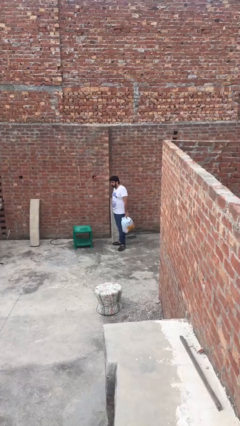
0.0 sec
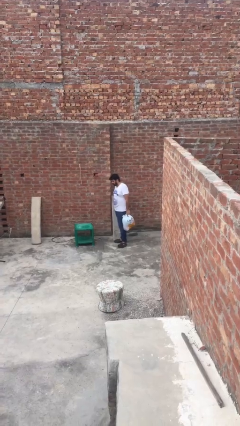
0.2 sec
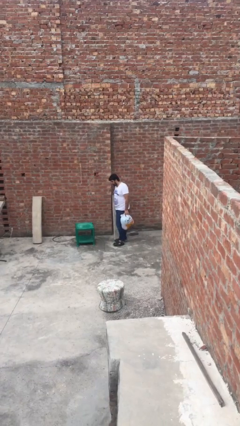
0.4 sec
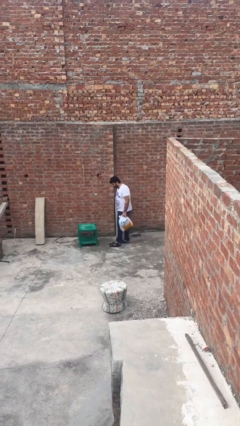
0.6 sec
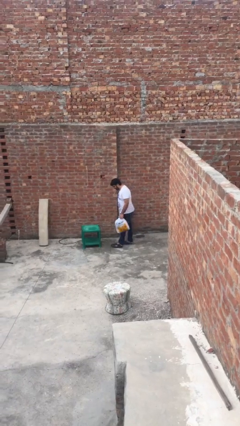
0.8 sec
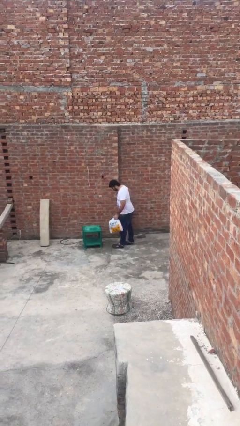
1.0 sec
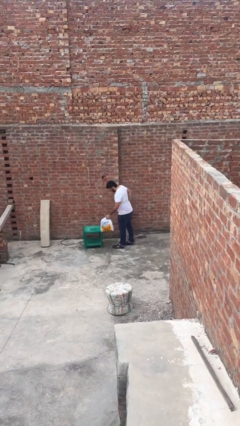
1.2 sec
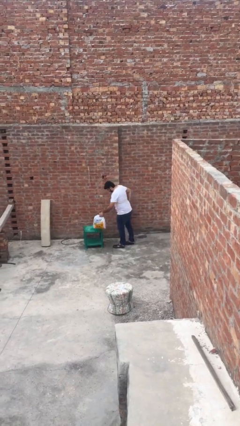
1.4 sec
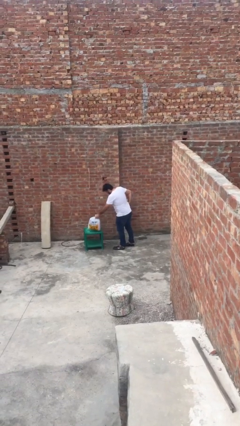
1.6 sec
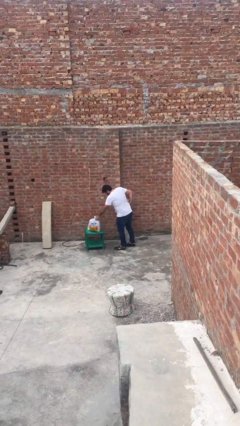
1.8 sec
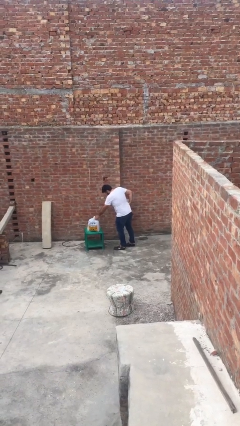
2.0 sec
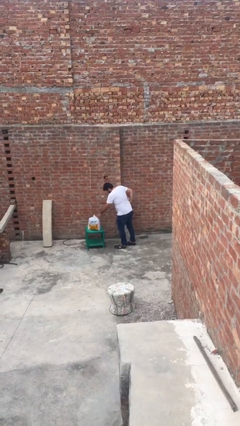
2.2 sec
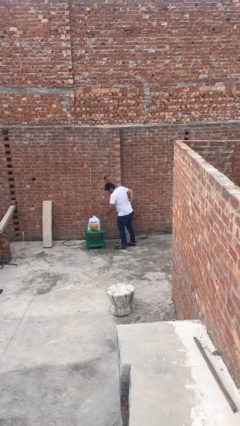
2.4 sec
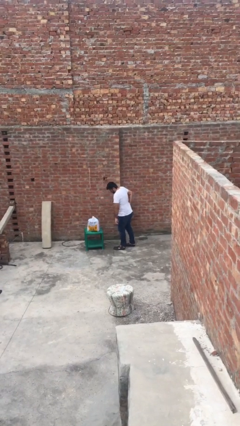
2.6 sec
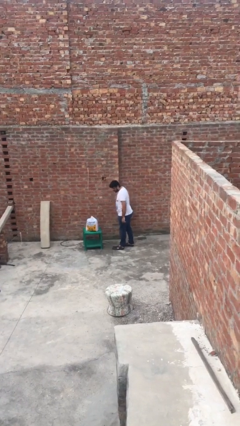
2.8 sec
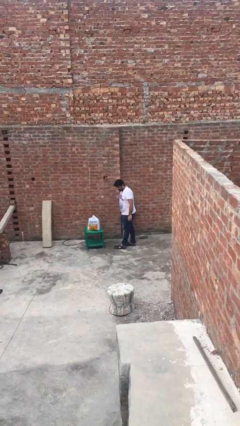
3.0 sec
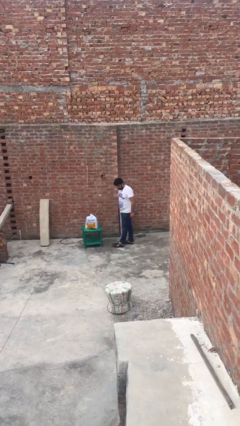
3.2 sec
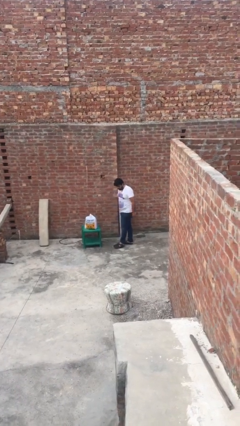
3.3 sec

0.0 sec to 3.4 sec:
person puts down object on table

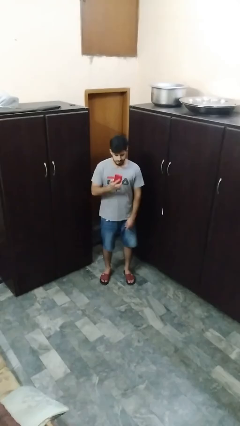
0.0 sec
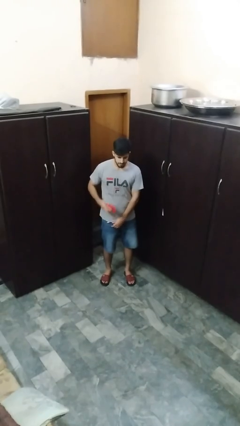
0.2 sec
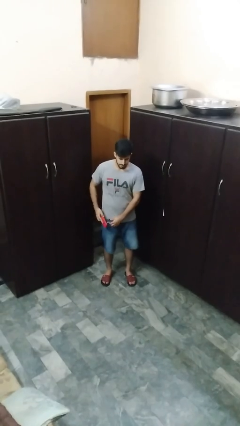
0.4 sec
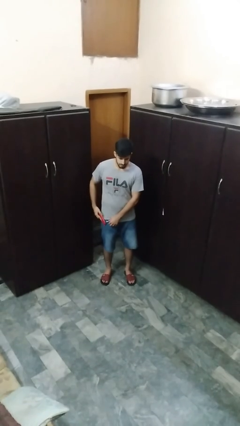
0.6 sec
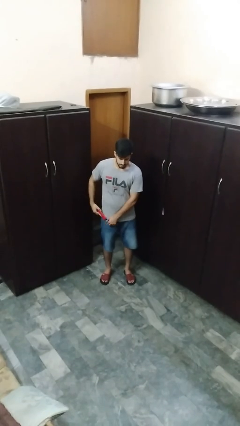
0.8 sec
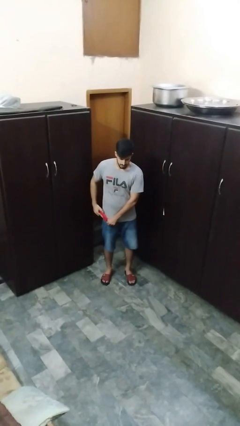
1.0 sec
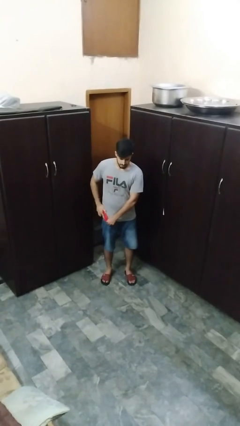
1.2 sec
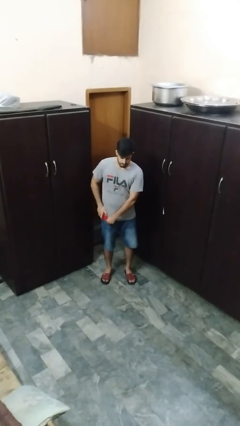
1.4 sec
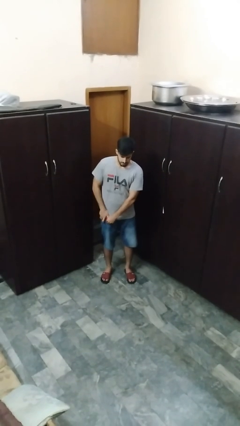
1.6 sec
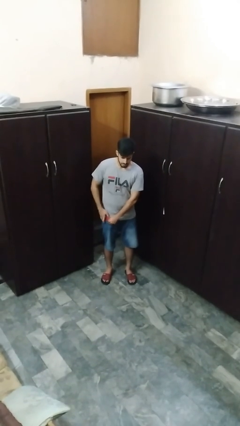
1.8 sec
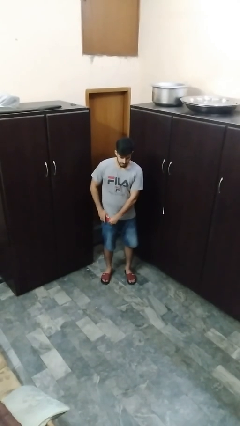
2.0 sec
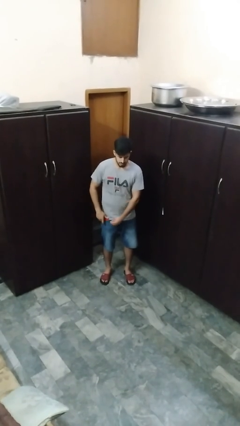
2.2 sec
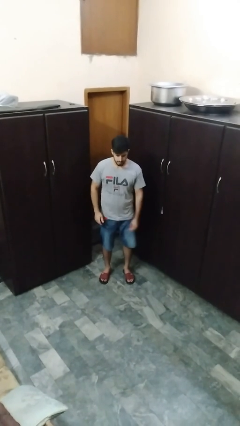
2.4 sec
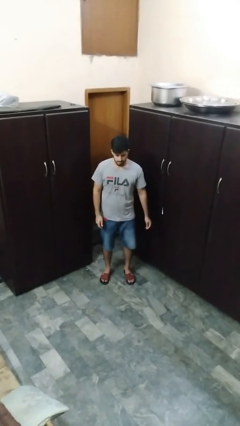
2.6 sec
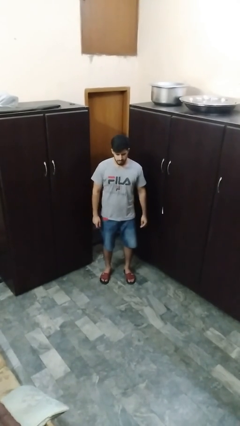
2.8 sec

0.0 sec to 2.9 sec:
person puts phone into pocket

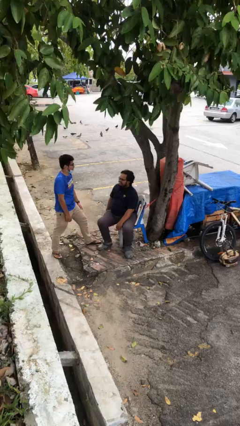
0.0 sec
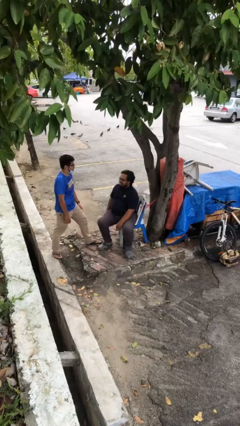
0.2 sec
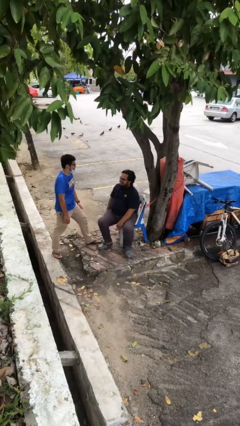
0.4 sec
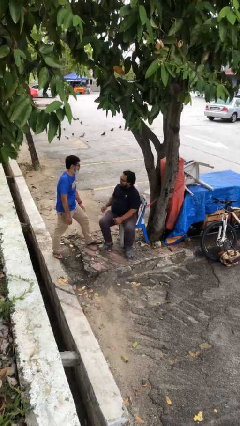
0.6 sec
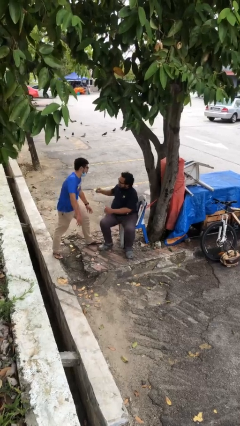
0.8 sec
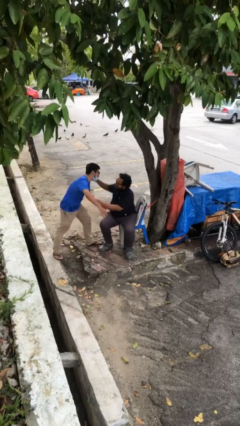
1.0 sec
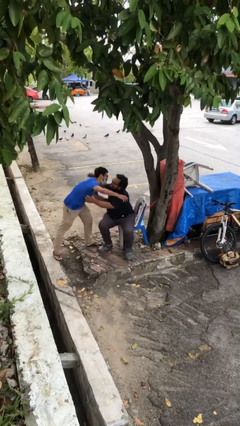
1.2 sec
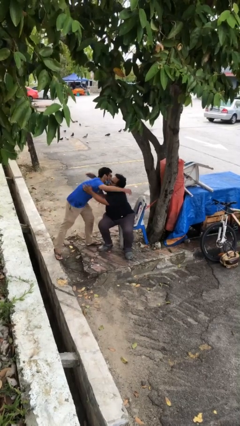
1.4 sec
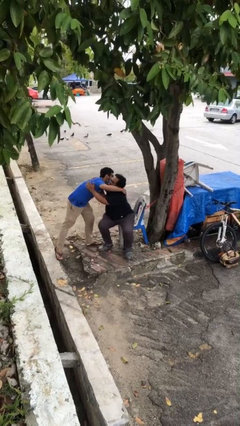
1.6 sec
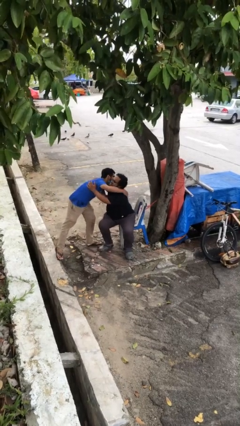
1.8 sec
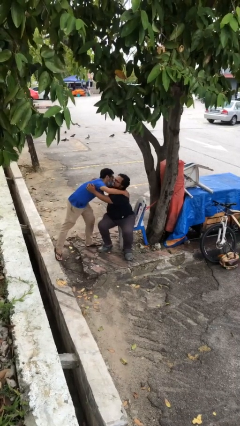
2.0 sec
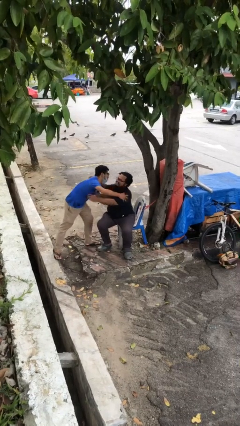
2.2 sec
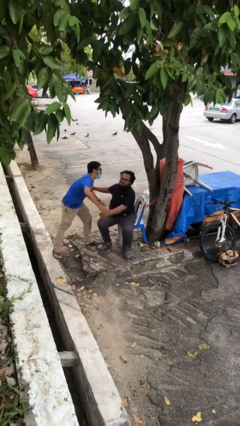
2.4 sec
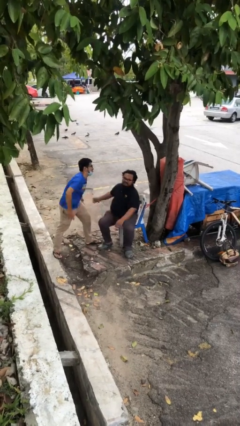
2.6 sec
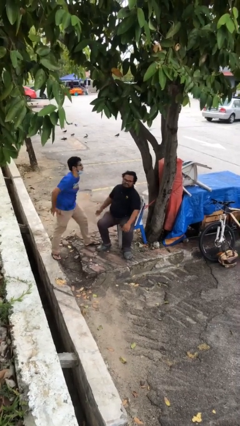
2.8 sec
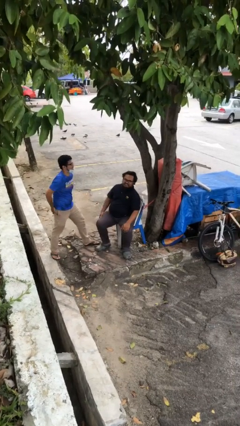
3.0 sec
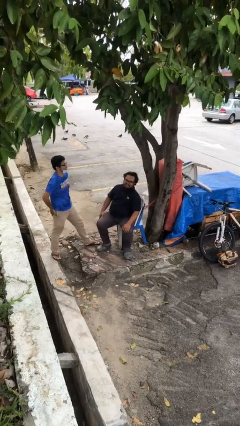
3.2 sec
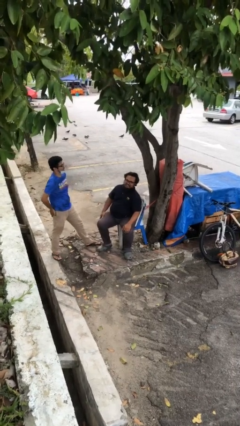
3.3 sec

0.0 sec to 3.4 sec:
person embraces person

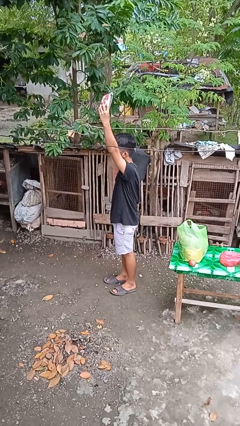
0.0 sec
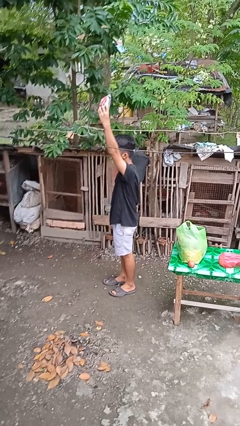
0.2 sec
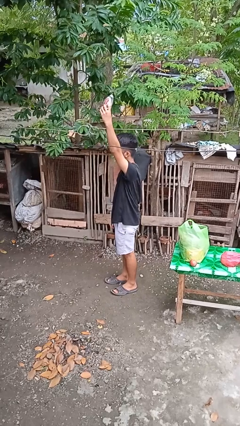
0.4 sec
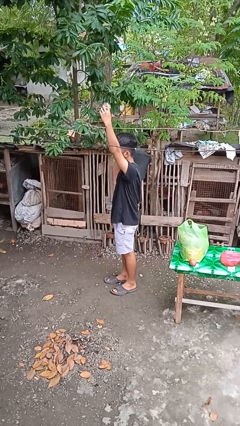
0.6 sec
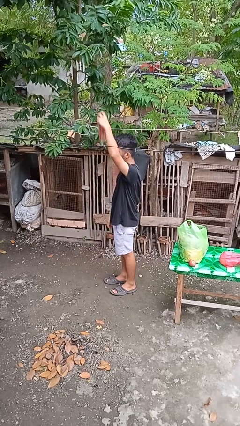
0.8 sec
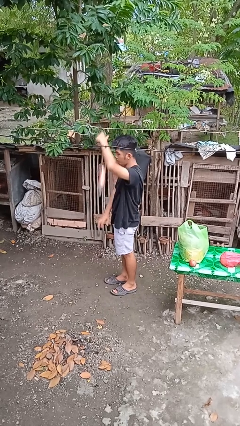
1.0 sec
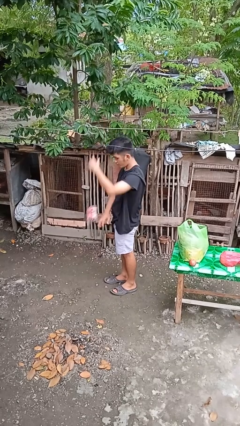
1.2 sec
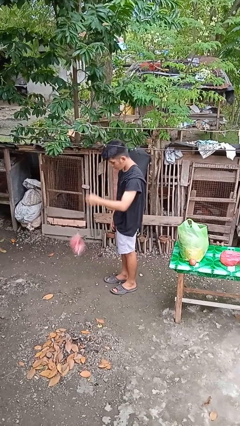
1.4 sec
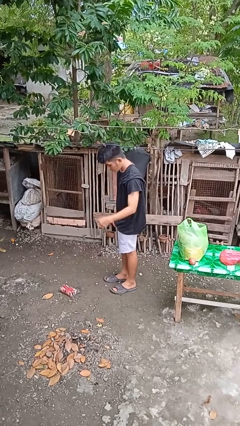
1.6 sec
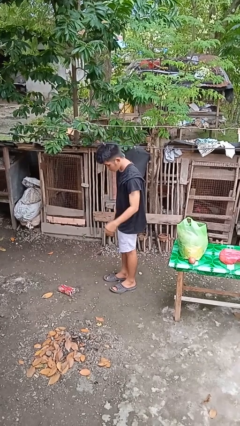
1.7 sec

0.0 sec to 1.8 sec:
person drops object

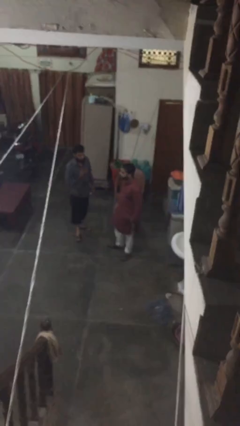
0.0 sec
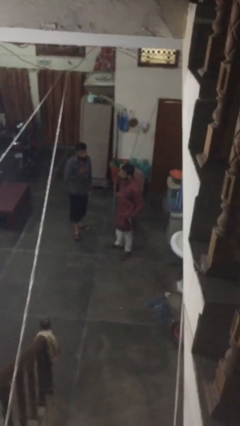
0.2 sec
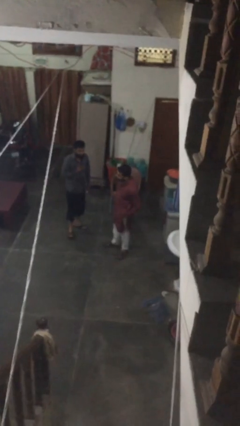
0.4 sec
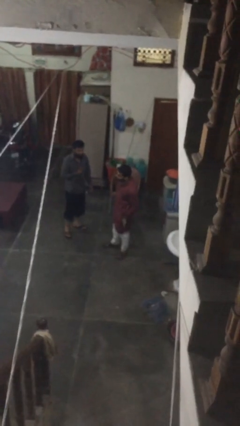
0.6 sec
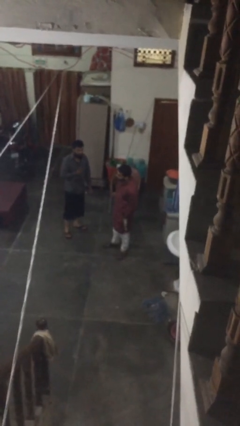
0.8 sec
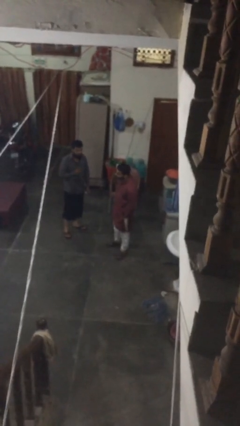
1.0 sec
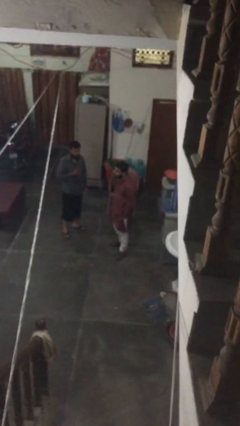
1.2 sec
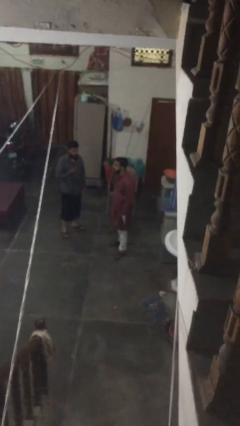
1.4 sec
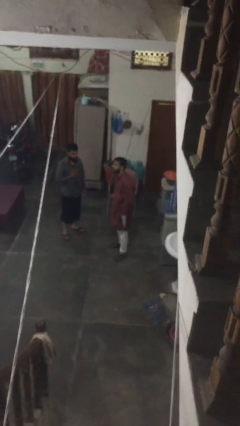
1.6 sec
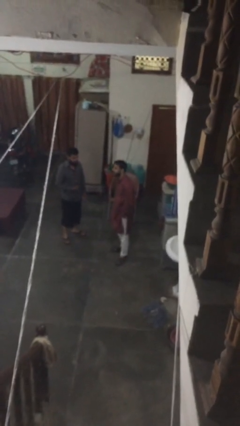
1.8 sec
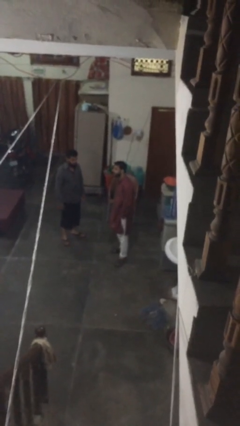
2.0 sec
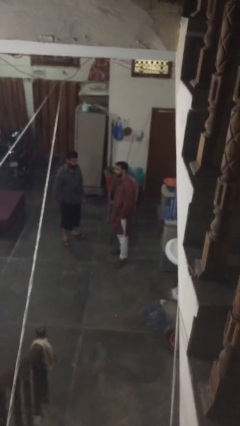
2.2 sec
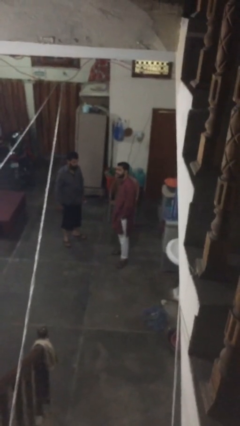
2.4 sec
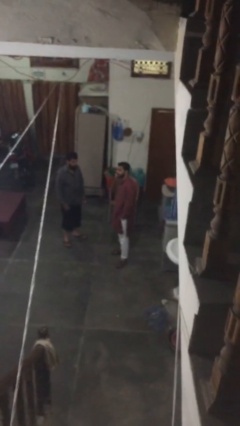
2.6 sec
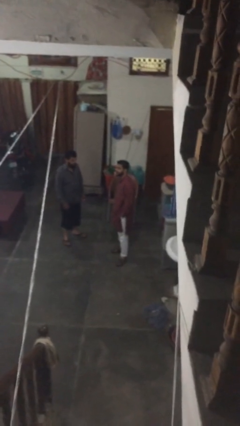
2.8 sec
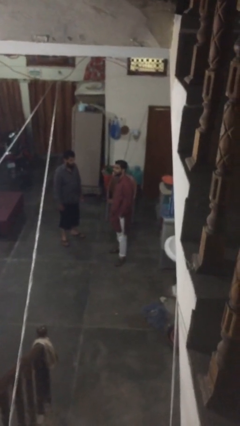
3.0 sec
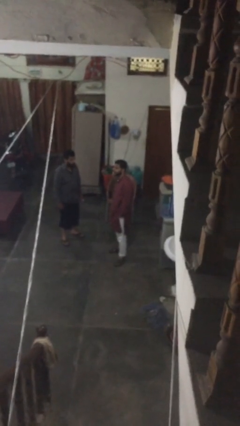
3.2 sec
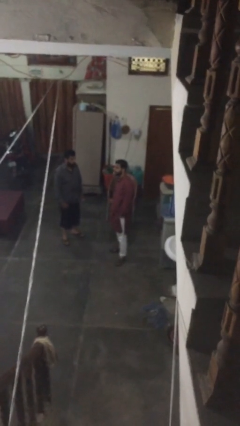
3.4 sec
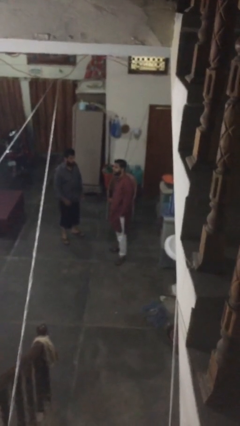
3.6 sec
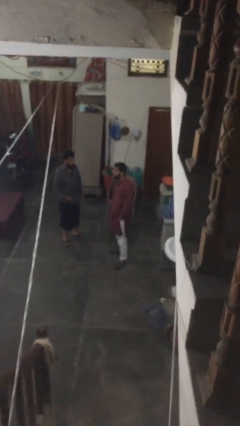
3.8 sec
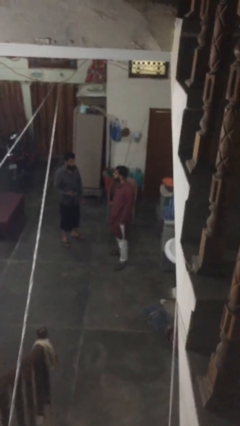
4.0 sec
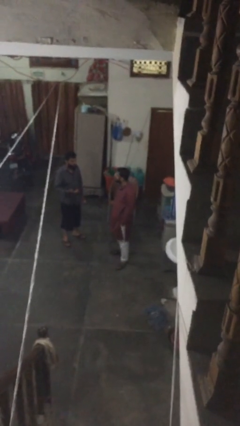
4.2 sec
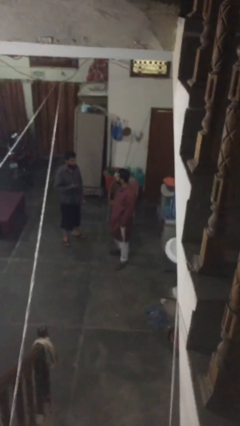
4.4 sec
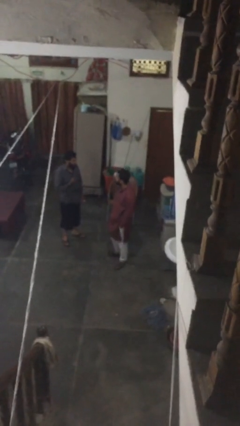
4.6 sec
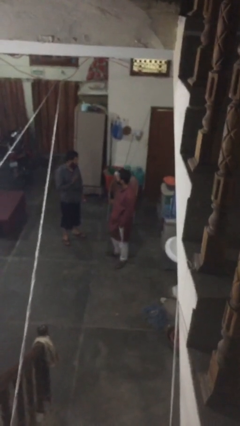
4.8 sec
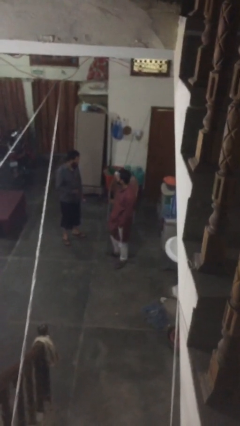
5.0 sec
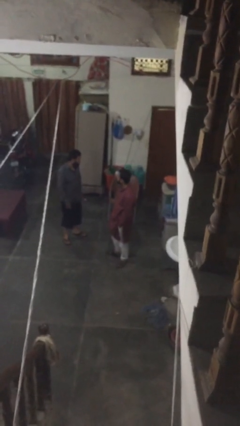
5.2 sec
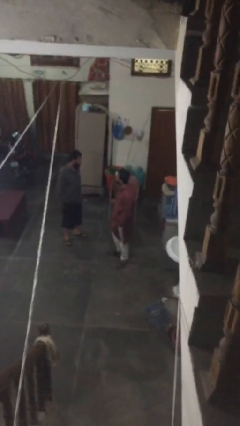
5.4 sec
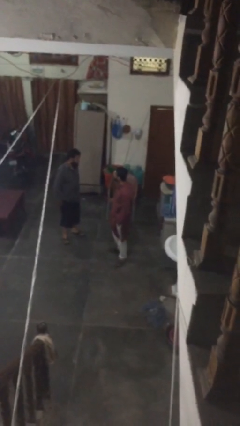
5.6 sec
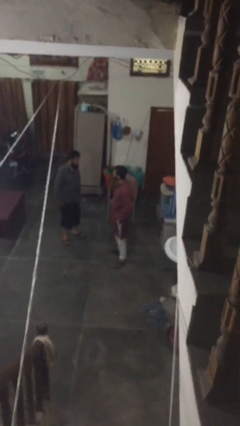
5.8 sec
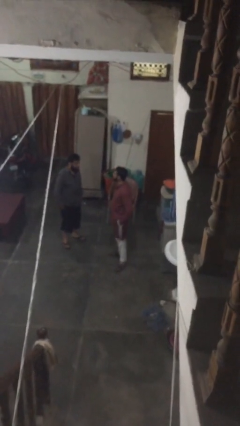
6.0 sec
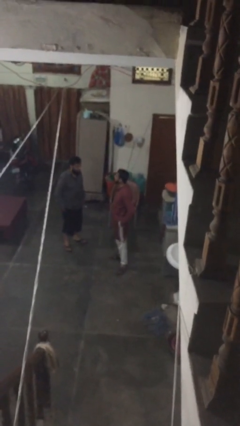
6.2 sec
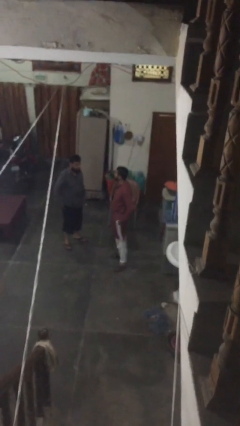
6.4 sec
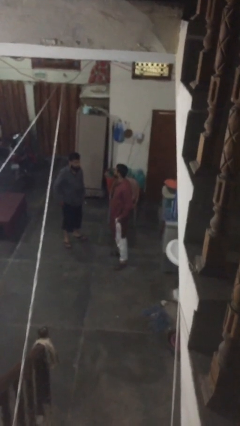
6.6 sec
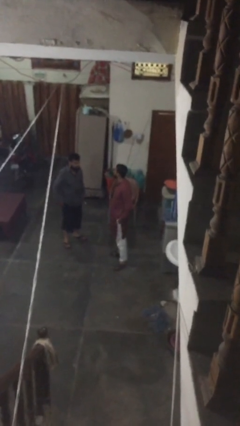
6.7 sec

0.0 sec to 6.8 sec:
person talks to person
